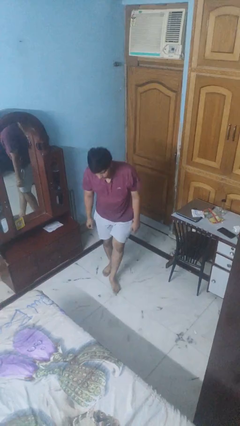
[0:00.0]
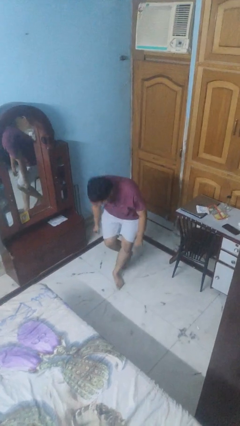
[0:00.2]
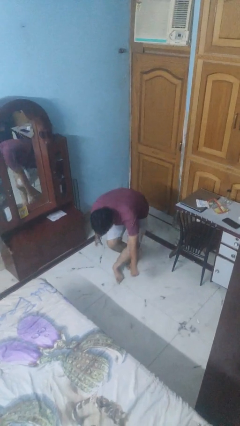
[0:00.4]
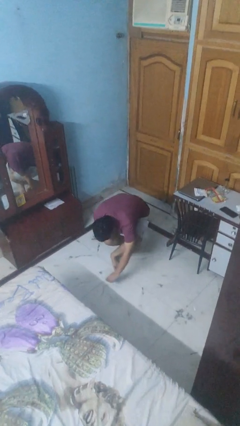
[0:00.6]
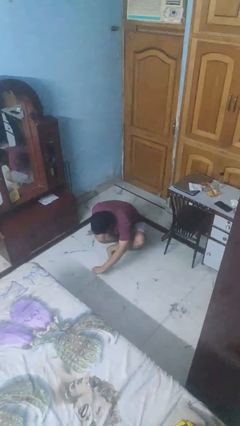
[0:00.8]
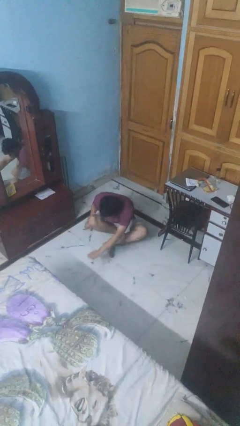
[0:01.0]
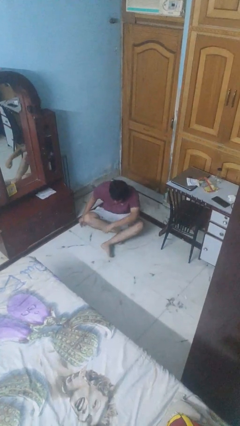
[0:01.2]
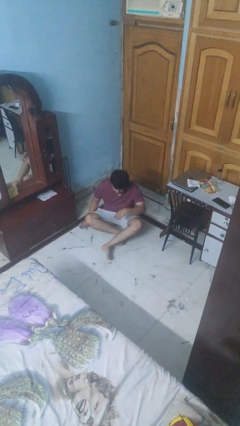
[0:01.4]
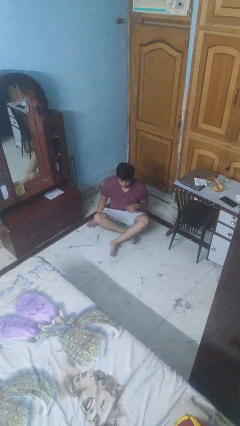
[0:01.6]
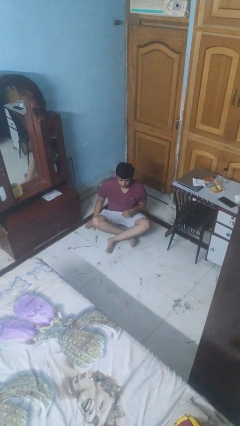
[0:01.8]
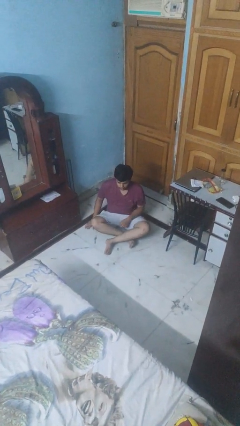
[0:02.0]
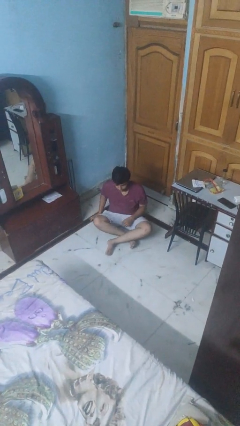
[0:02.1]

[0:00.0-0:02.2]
person sits crisscross

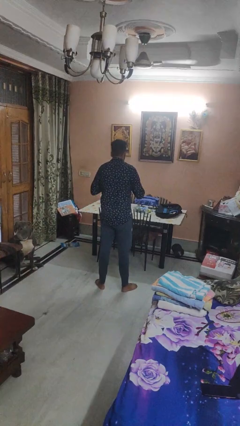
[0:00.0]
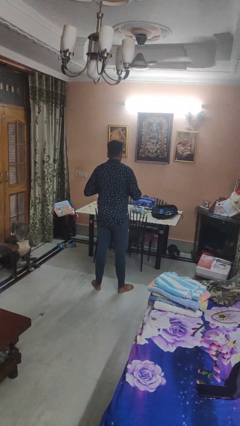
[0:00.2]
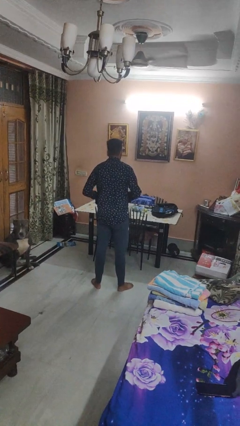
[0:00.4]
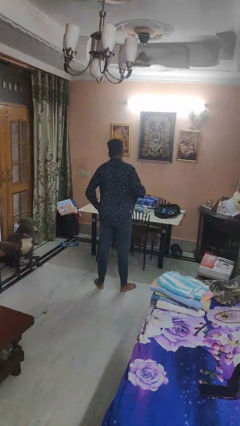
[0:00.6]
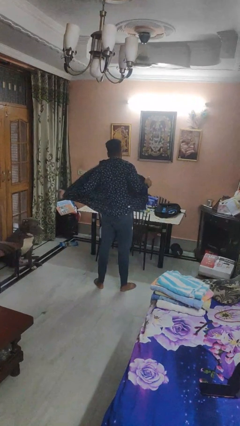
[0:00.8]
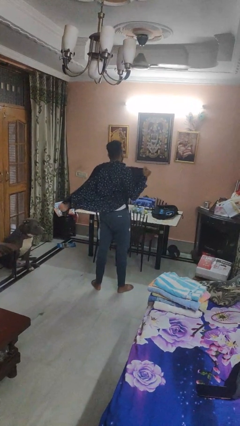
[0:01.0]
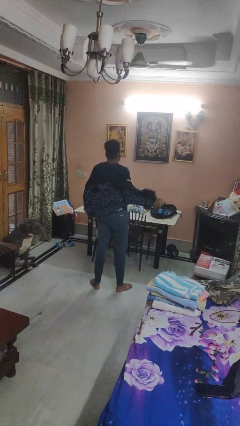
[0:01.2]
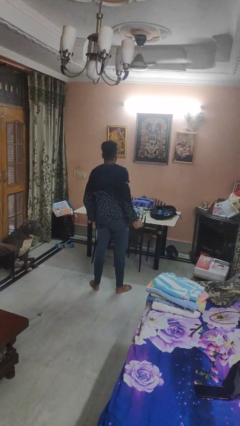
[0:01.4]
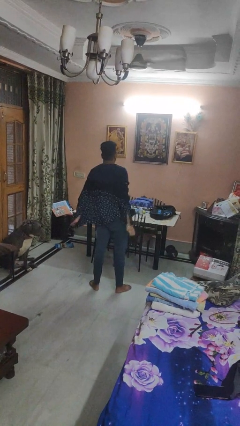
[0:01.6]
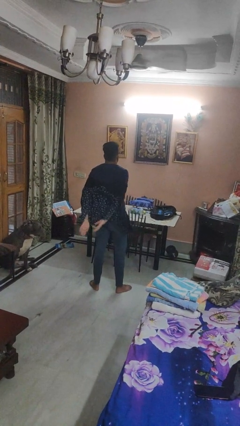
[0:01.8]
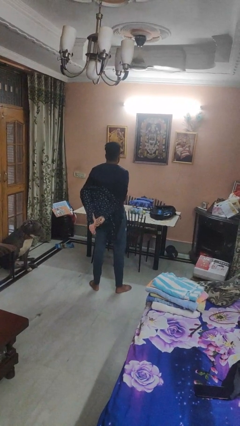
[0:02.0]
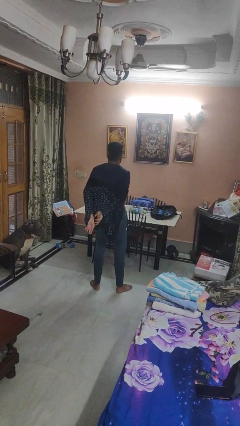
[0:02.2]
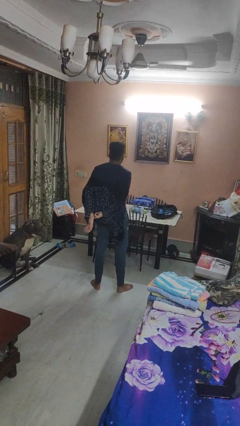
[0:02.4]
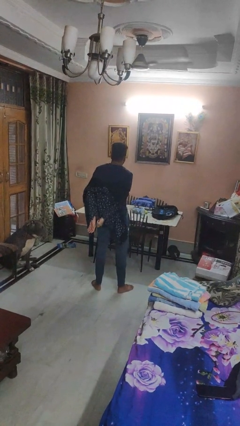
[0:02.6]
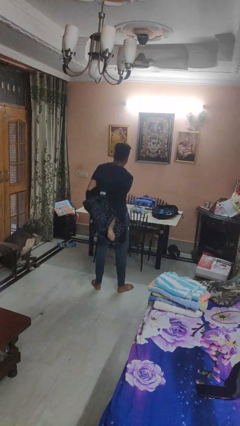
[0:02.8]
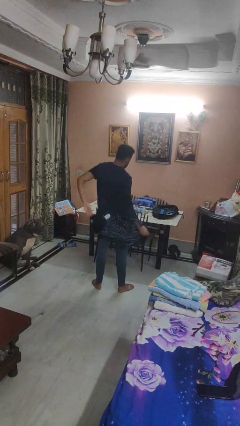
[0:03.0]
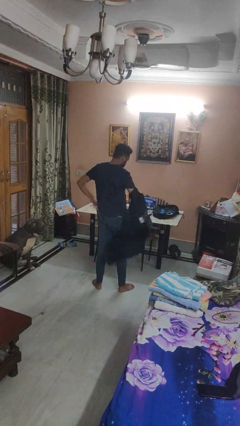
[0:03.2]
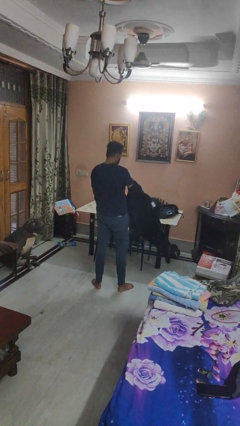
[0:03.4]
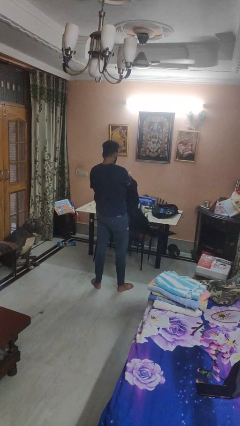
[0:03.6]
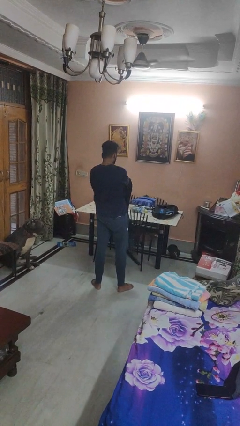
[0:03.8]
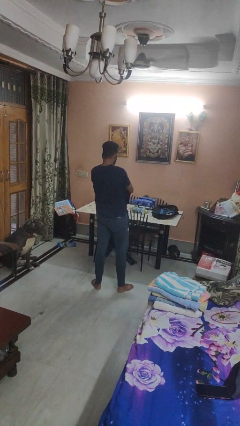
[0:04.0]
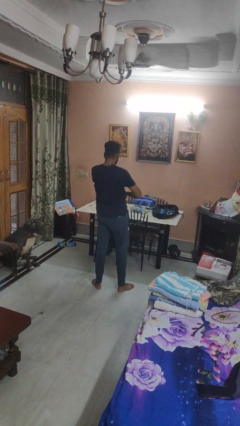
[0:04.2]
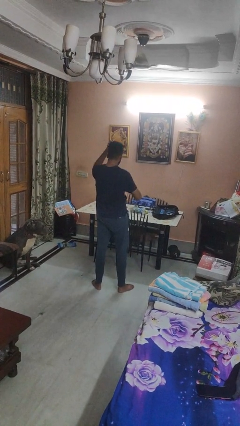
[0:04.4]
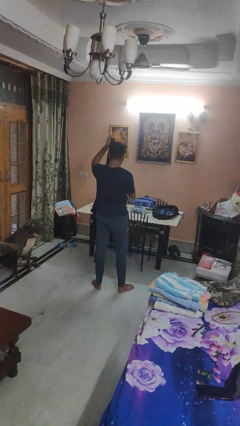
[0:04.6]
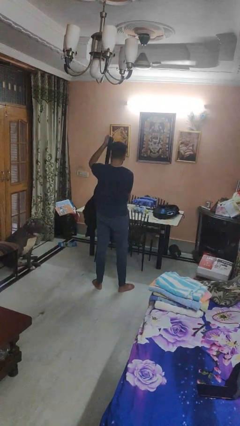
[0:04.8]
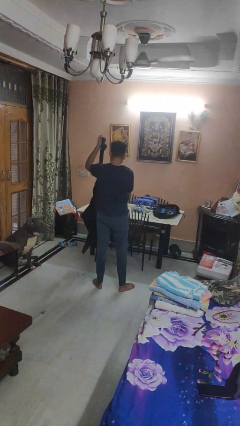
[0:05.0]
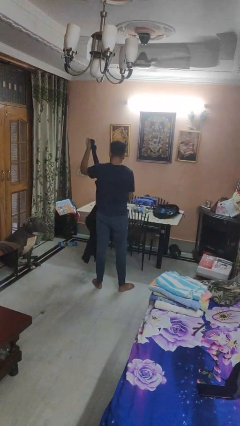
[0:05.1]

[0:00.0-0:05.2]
person takes off shirt

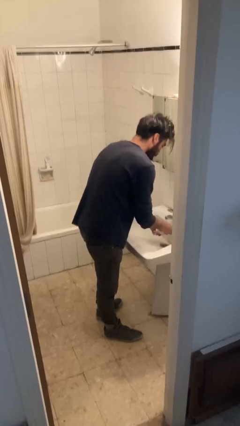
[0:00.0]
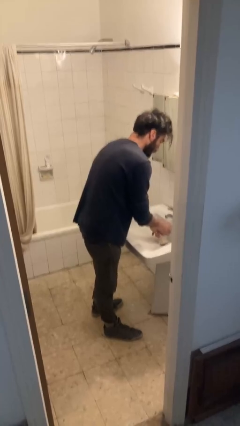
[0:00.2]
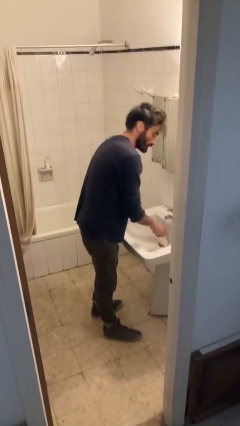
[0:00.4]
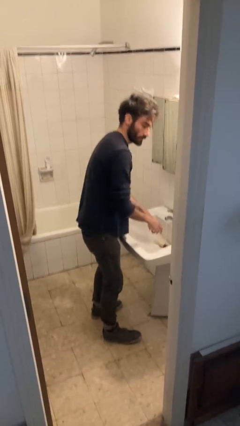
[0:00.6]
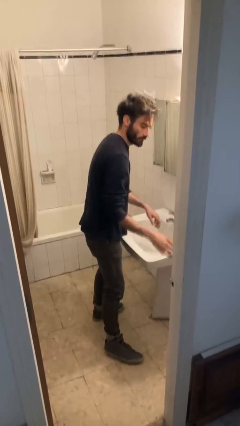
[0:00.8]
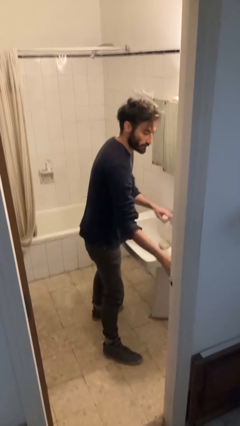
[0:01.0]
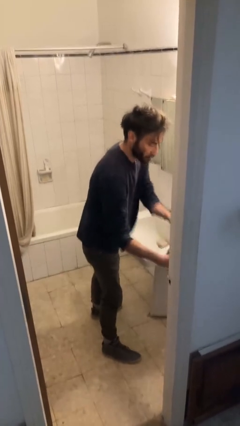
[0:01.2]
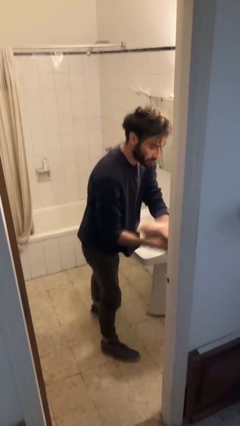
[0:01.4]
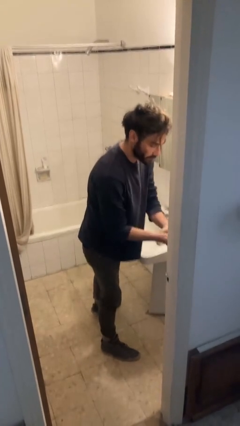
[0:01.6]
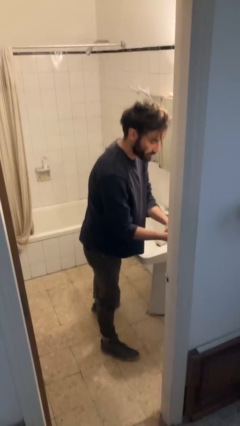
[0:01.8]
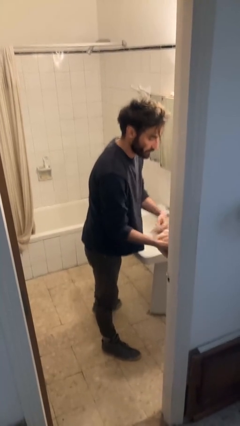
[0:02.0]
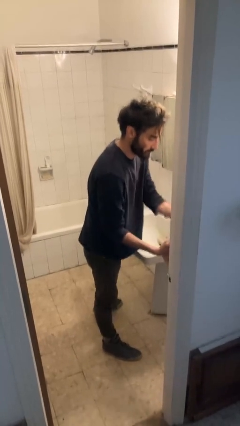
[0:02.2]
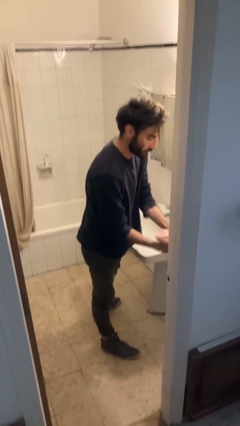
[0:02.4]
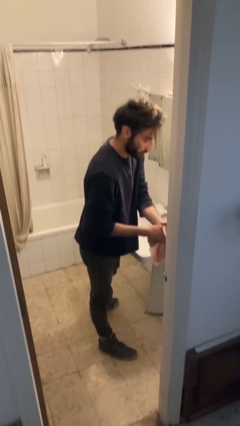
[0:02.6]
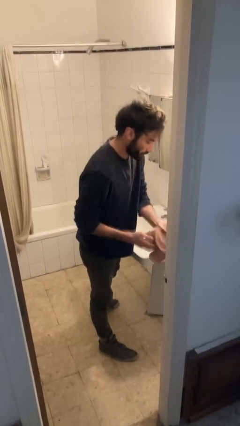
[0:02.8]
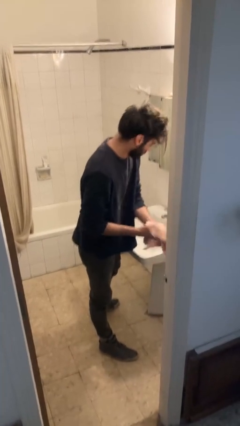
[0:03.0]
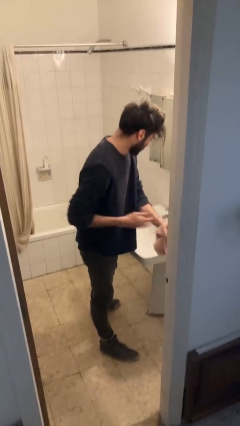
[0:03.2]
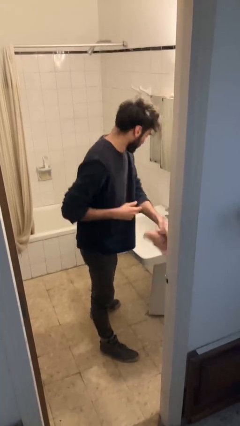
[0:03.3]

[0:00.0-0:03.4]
person dries hands with towel

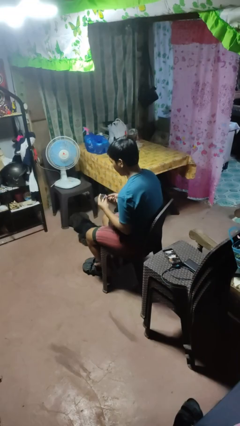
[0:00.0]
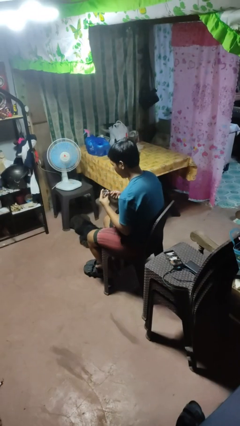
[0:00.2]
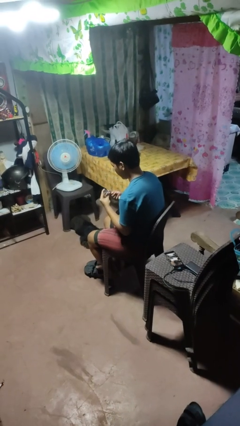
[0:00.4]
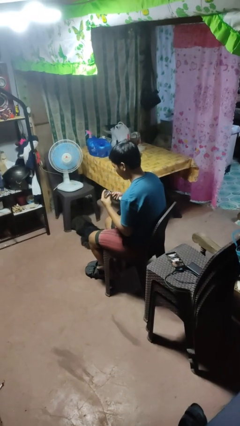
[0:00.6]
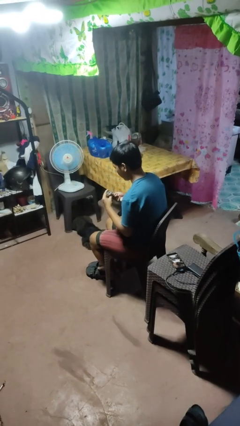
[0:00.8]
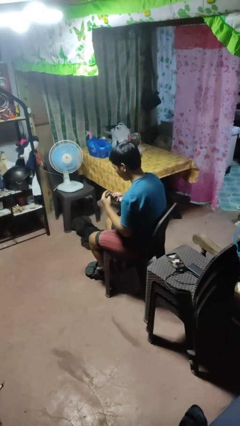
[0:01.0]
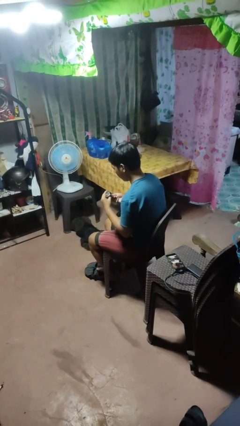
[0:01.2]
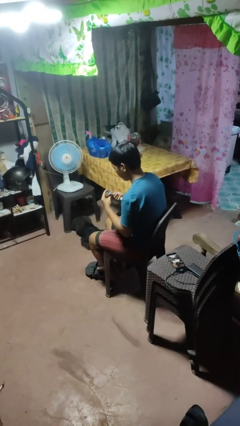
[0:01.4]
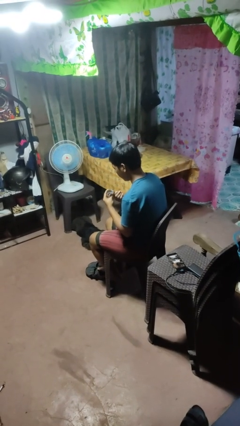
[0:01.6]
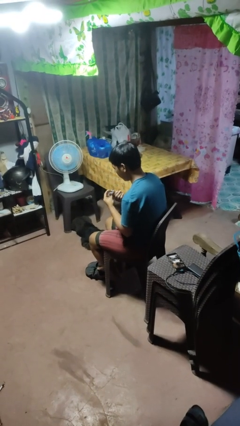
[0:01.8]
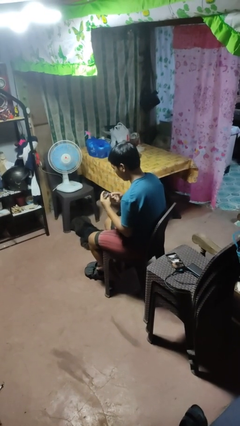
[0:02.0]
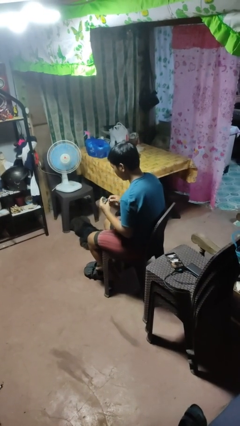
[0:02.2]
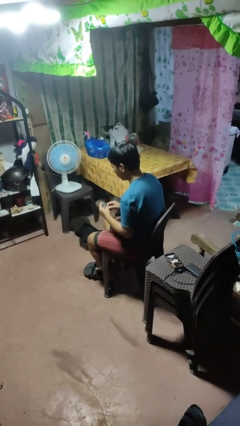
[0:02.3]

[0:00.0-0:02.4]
person clips fingernails

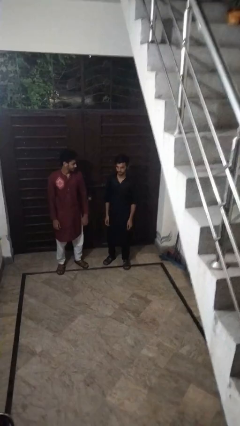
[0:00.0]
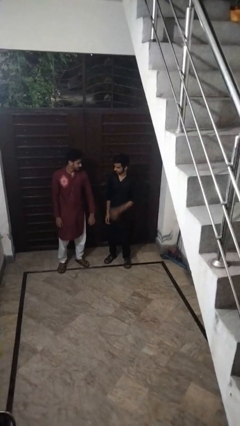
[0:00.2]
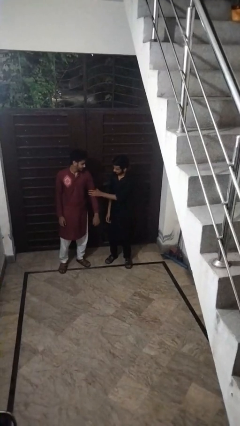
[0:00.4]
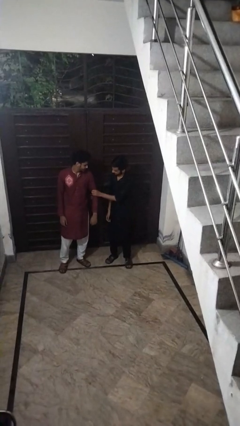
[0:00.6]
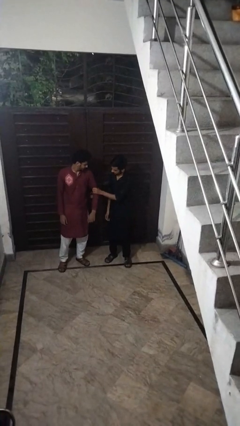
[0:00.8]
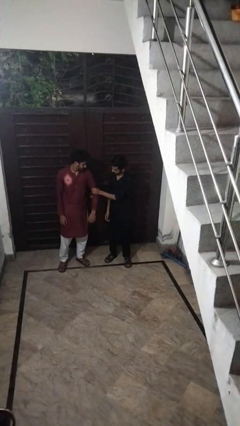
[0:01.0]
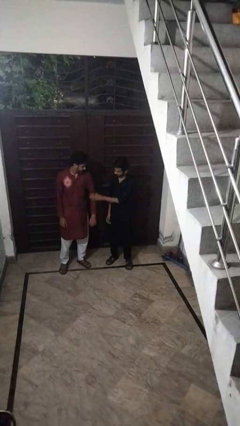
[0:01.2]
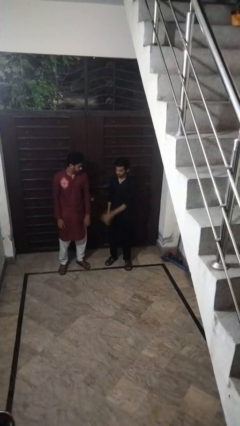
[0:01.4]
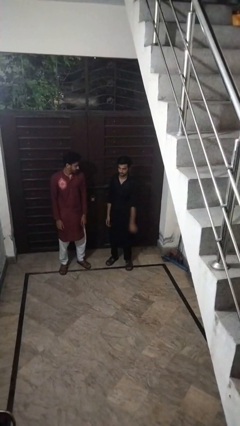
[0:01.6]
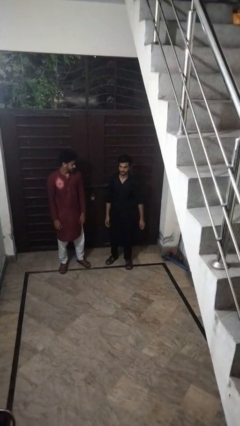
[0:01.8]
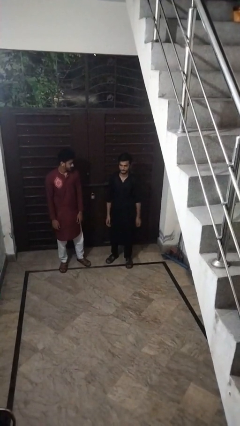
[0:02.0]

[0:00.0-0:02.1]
person grabs person by bicep

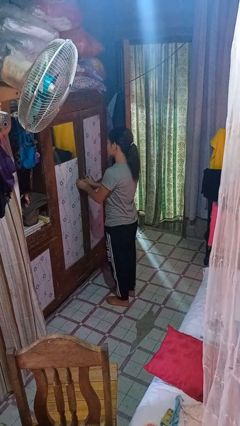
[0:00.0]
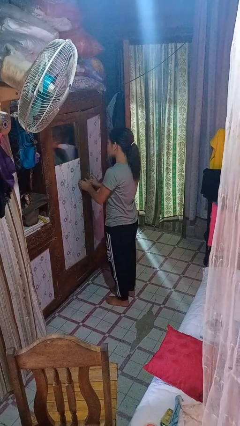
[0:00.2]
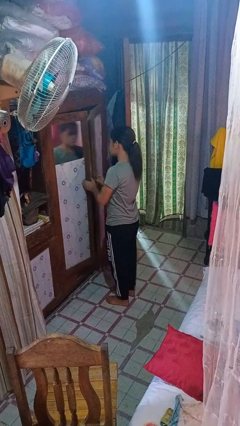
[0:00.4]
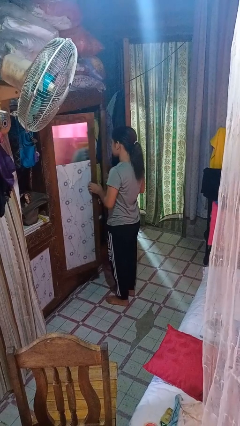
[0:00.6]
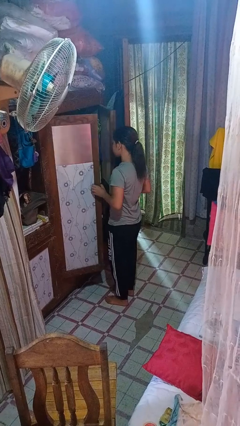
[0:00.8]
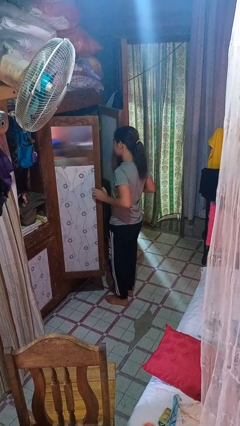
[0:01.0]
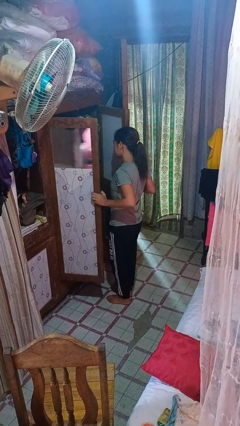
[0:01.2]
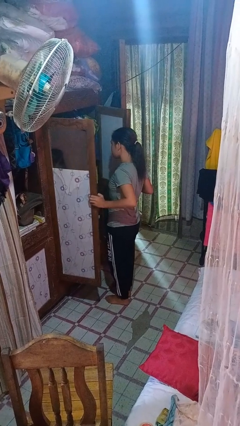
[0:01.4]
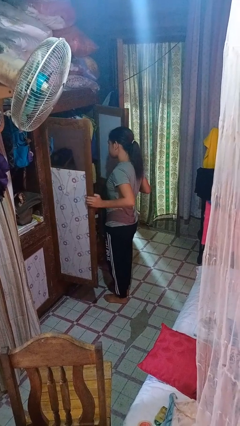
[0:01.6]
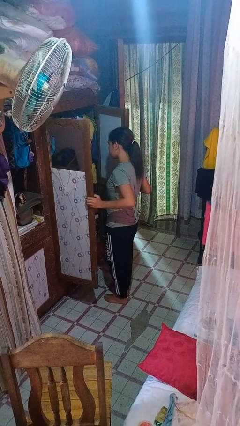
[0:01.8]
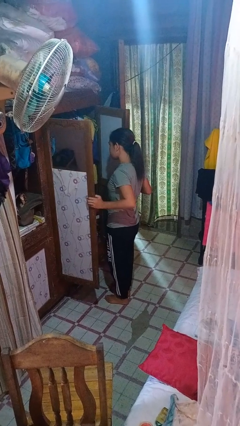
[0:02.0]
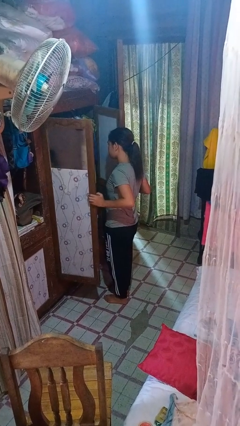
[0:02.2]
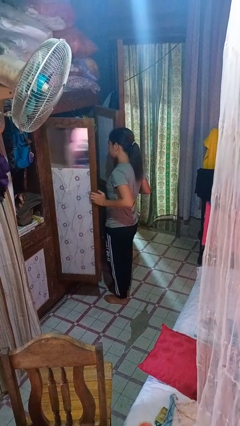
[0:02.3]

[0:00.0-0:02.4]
person opens closet door

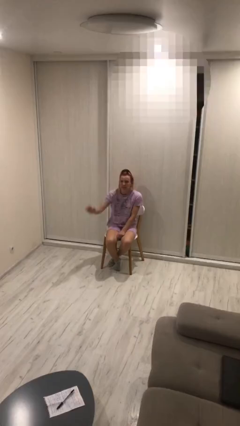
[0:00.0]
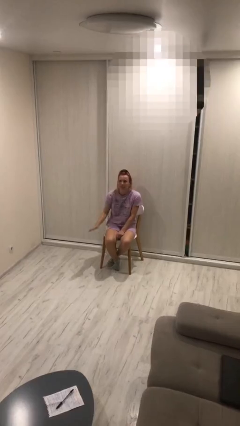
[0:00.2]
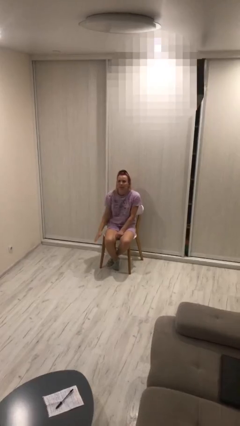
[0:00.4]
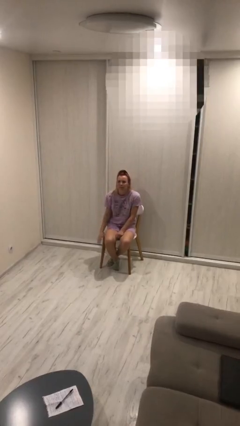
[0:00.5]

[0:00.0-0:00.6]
person gestures lower hand
